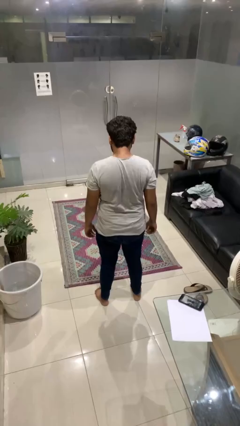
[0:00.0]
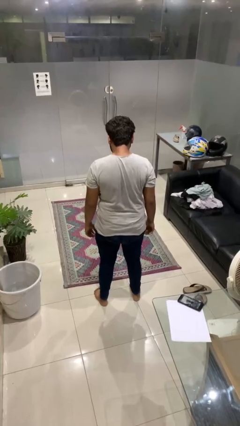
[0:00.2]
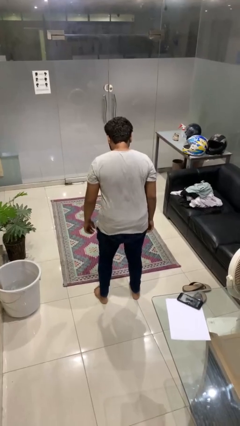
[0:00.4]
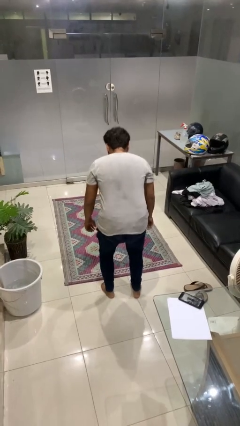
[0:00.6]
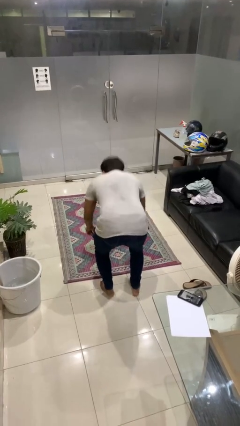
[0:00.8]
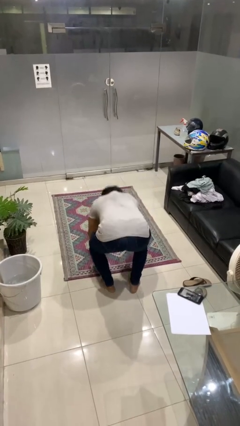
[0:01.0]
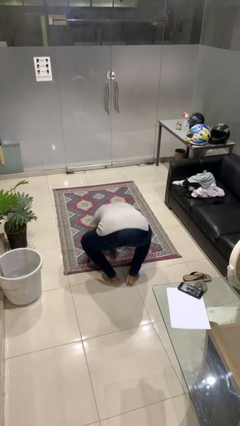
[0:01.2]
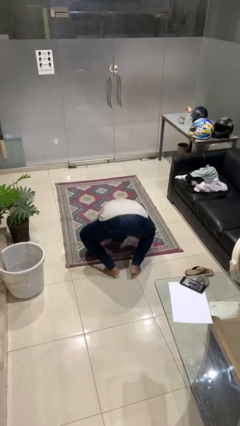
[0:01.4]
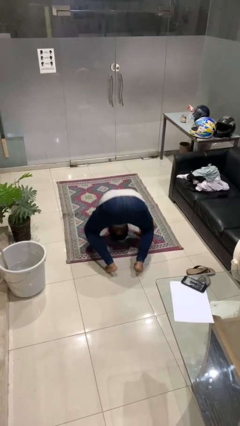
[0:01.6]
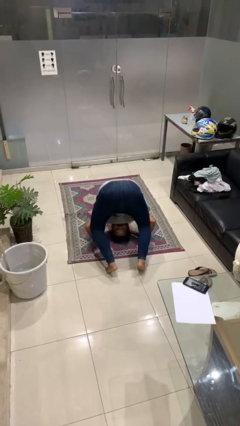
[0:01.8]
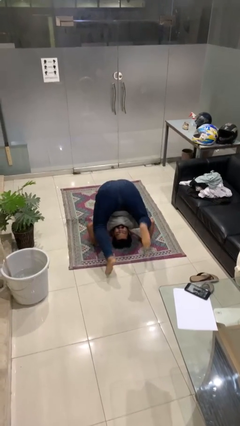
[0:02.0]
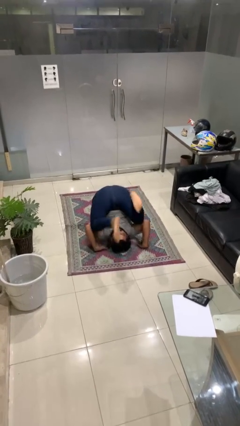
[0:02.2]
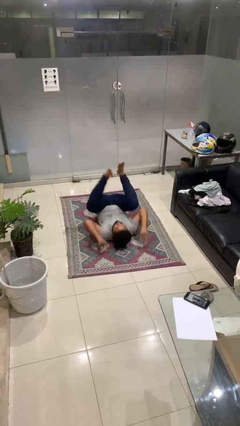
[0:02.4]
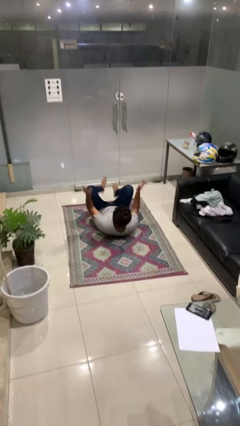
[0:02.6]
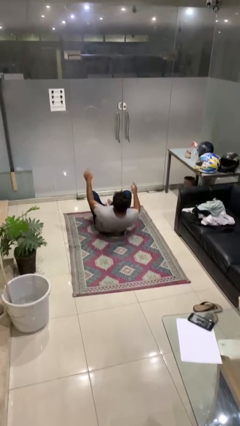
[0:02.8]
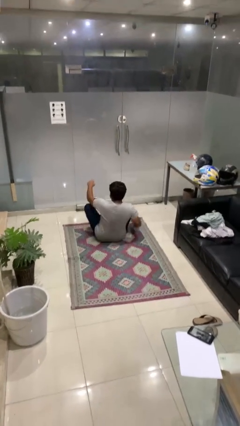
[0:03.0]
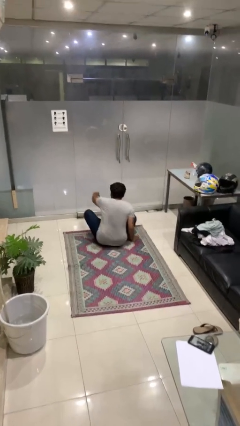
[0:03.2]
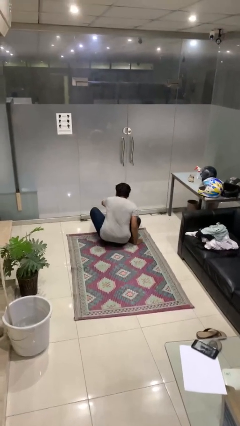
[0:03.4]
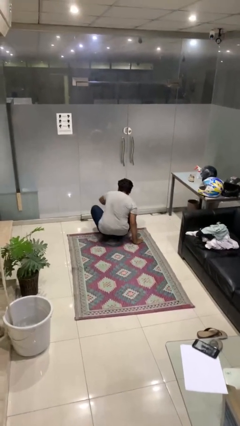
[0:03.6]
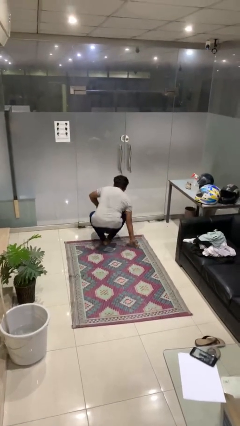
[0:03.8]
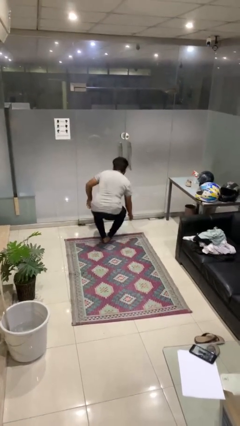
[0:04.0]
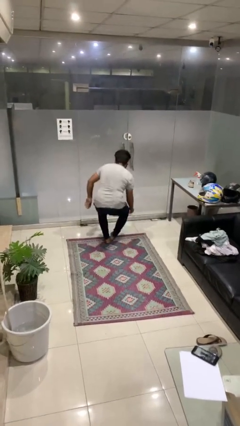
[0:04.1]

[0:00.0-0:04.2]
person somersaults

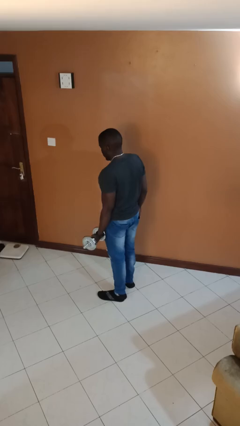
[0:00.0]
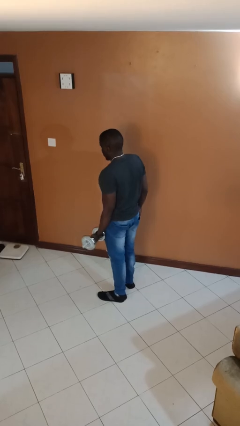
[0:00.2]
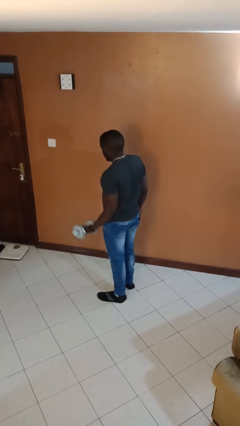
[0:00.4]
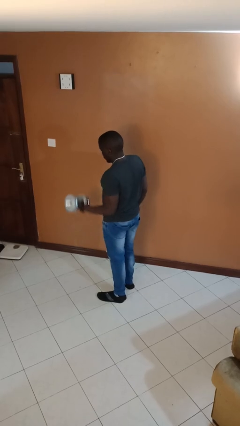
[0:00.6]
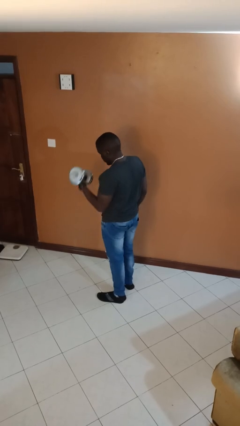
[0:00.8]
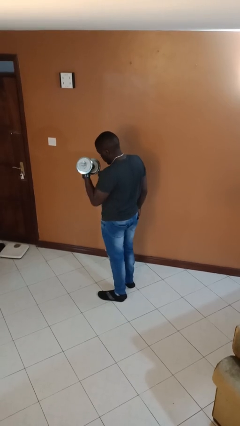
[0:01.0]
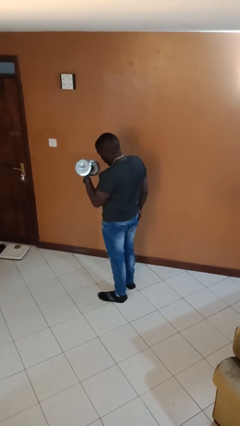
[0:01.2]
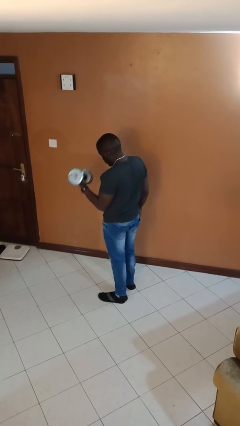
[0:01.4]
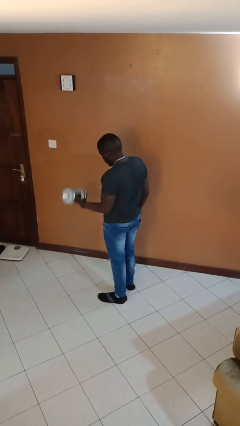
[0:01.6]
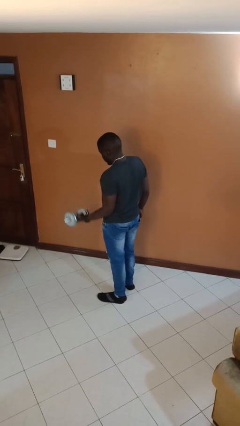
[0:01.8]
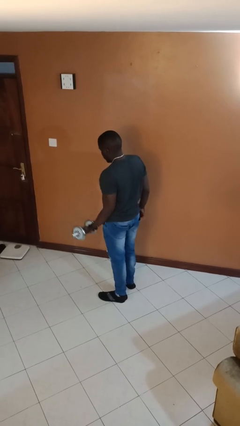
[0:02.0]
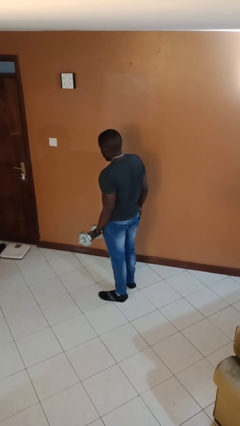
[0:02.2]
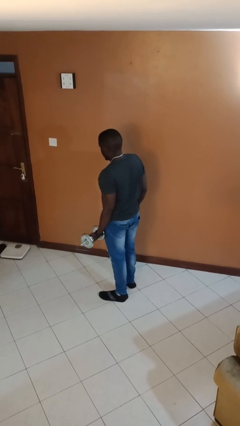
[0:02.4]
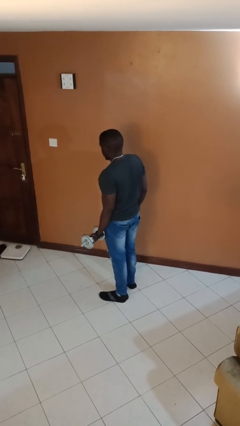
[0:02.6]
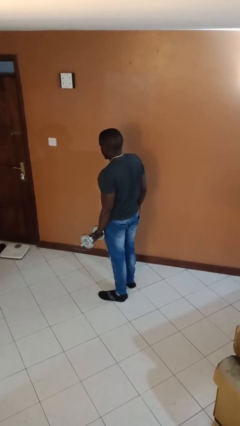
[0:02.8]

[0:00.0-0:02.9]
person lifts dumbbells

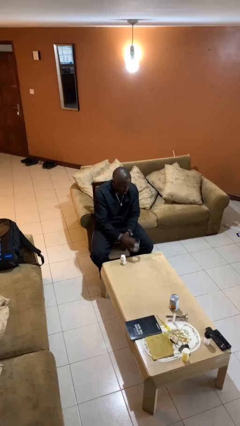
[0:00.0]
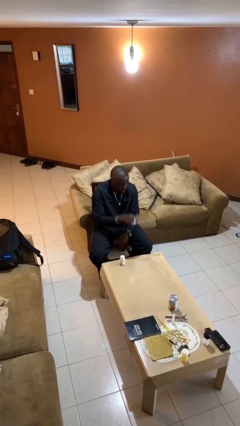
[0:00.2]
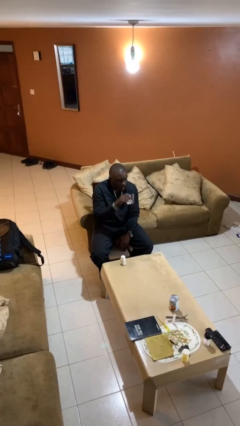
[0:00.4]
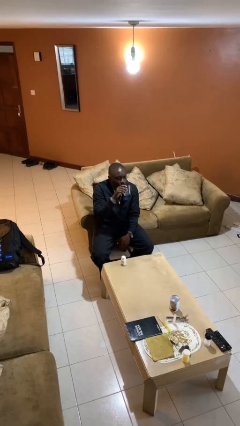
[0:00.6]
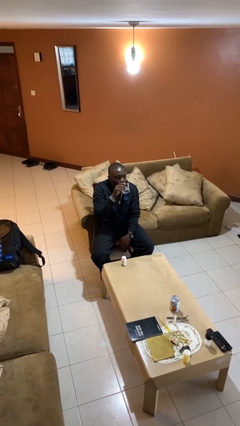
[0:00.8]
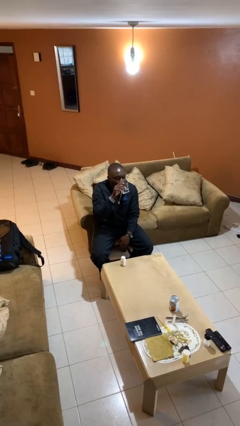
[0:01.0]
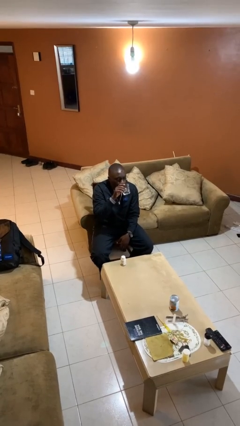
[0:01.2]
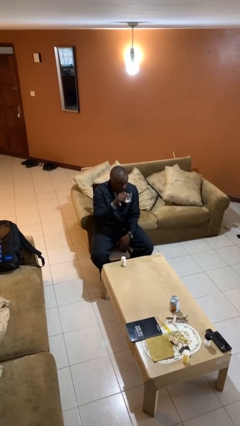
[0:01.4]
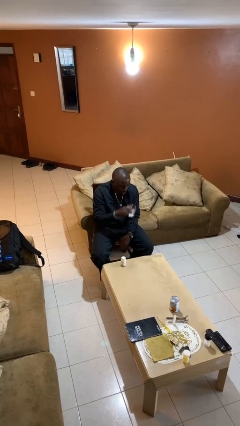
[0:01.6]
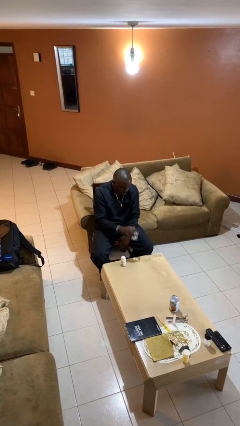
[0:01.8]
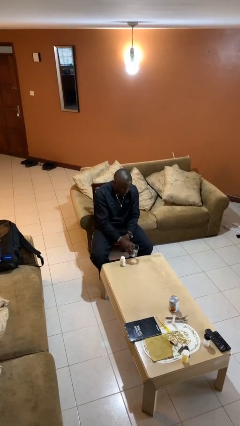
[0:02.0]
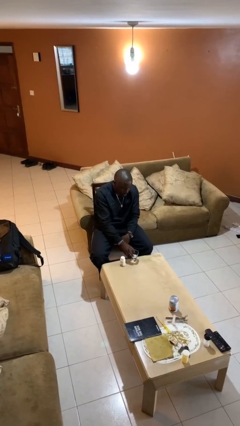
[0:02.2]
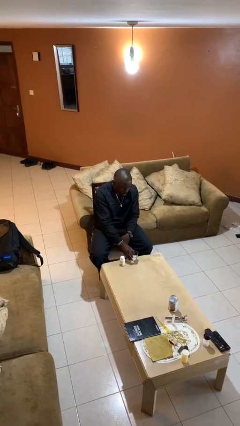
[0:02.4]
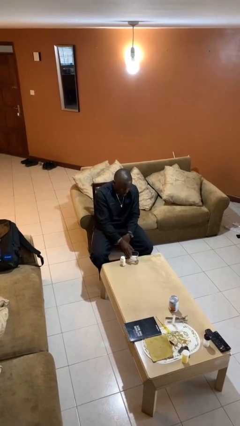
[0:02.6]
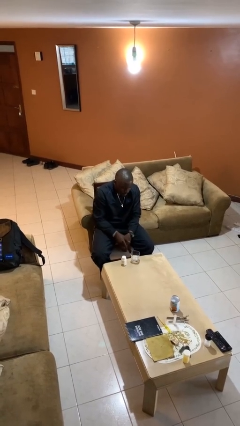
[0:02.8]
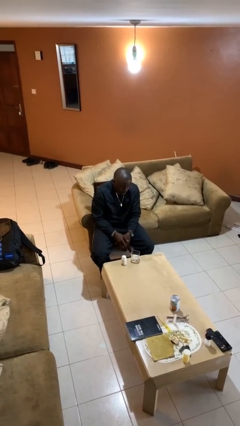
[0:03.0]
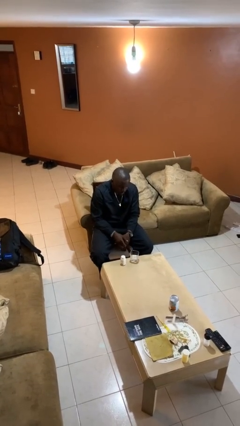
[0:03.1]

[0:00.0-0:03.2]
person drinks from cup

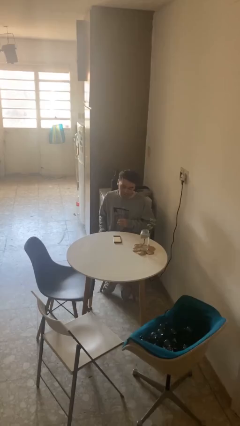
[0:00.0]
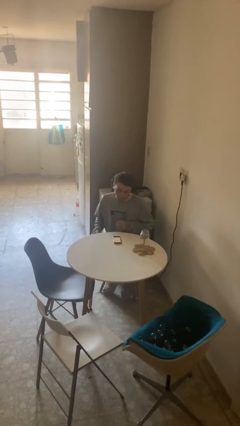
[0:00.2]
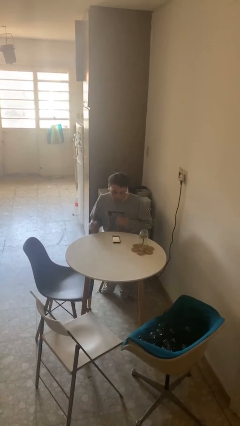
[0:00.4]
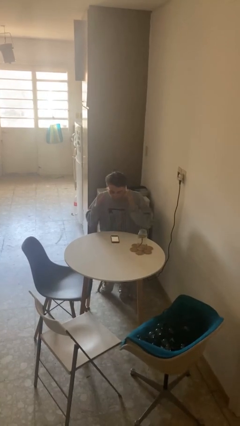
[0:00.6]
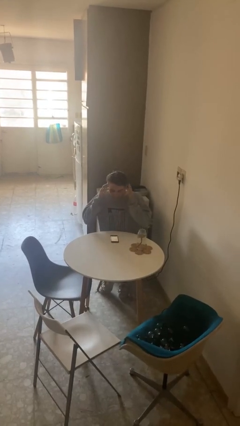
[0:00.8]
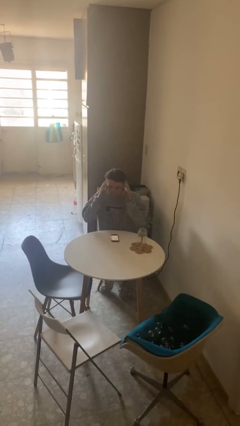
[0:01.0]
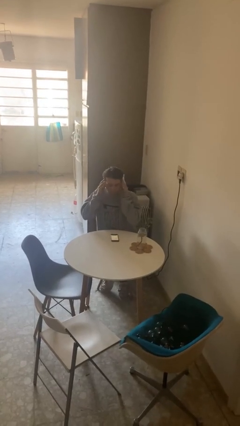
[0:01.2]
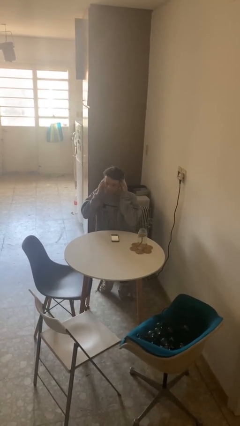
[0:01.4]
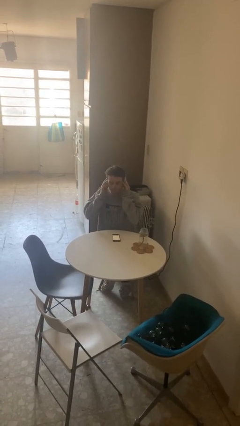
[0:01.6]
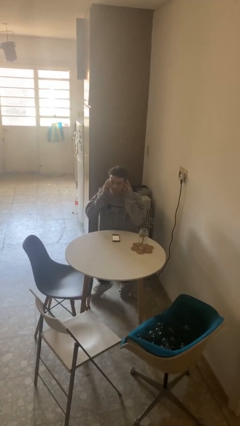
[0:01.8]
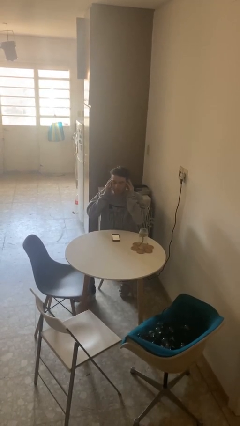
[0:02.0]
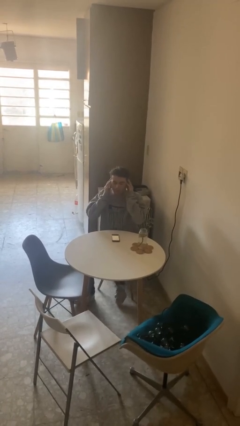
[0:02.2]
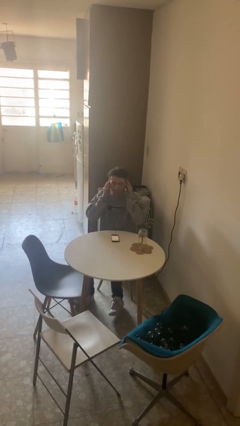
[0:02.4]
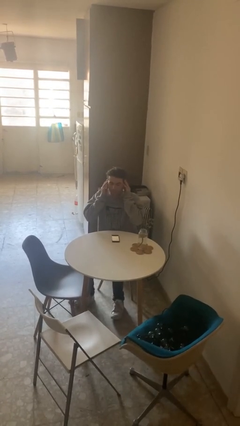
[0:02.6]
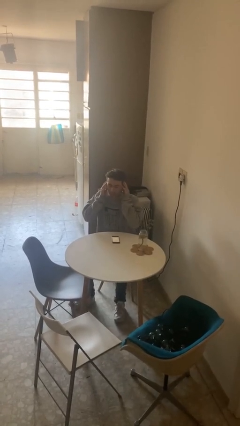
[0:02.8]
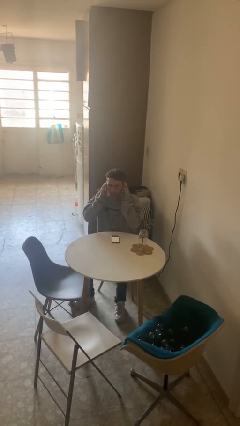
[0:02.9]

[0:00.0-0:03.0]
person puts fingers in ear

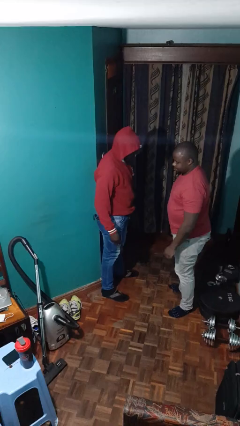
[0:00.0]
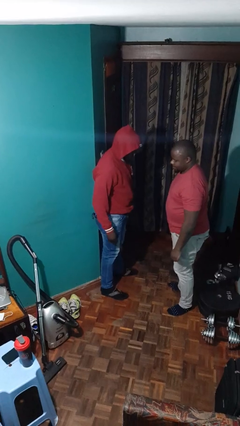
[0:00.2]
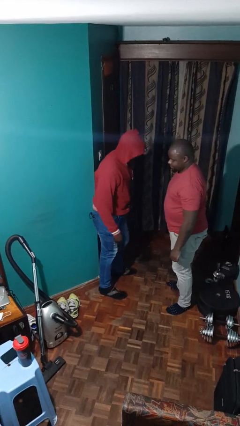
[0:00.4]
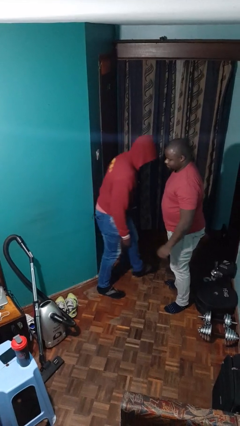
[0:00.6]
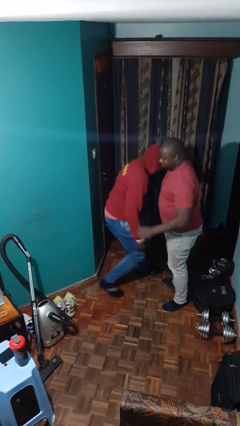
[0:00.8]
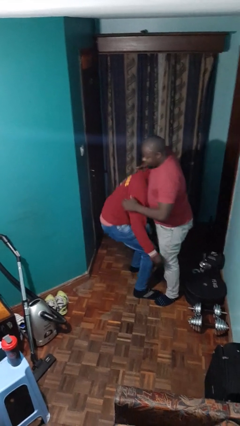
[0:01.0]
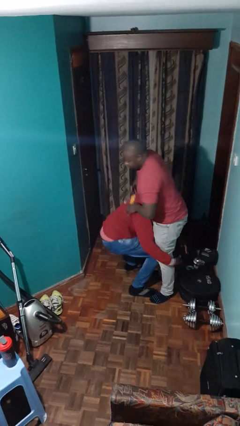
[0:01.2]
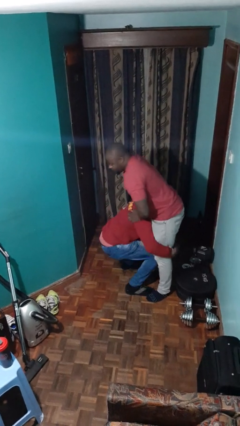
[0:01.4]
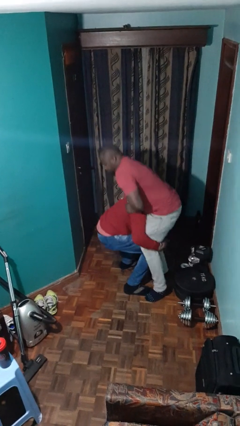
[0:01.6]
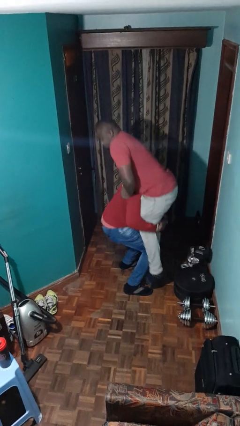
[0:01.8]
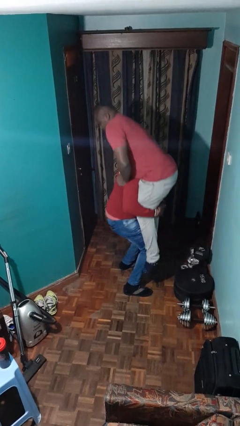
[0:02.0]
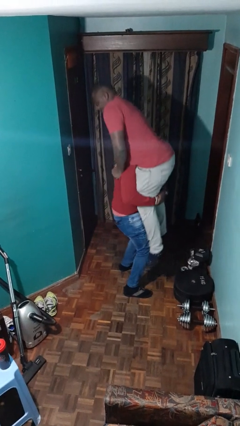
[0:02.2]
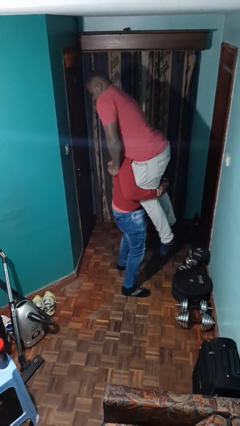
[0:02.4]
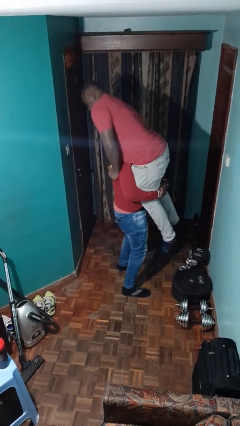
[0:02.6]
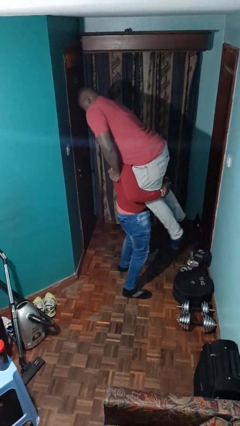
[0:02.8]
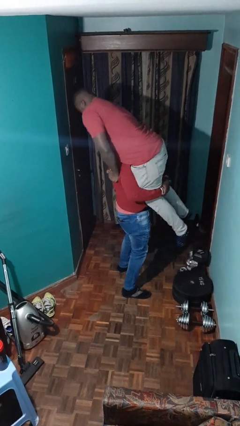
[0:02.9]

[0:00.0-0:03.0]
person picks up person

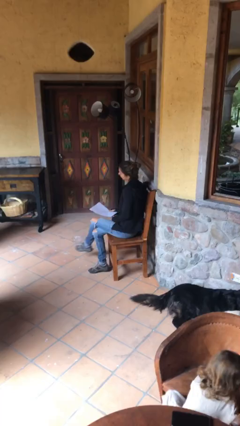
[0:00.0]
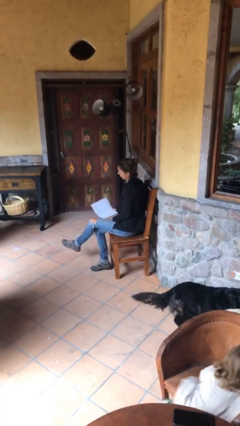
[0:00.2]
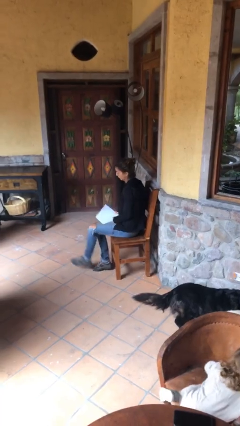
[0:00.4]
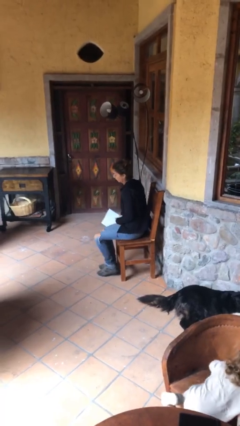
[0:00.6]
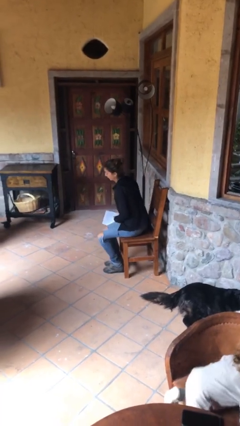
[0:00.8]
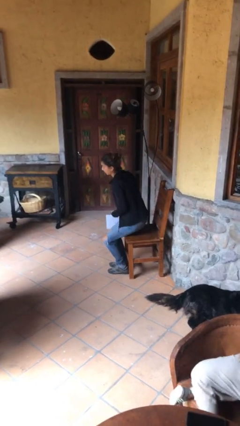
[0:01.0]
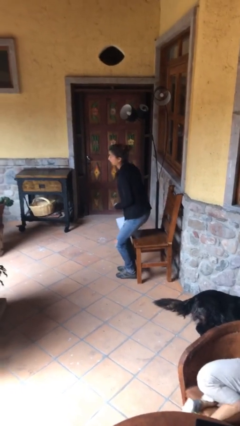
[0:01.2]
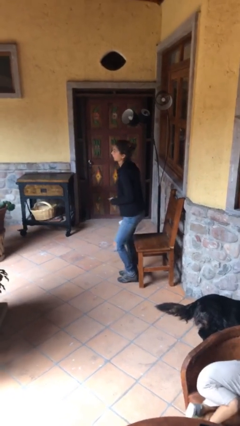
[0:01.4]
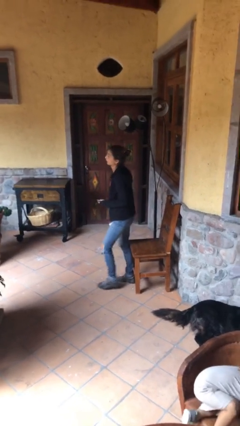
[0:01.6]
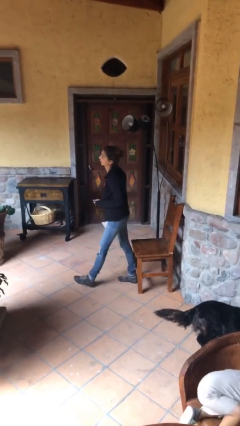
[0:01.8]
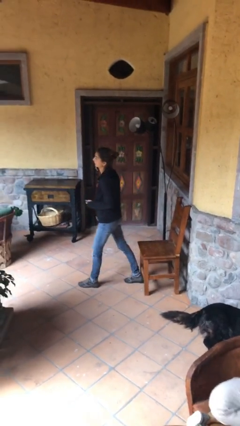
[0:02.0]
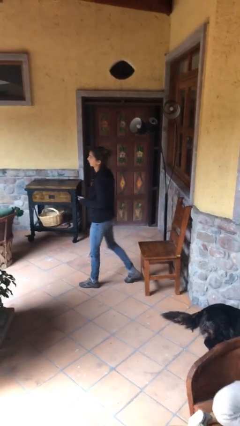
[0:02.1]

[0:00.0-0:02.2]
person stands up
